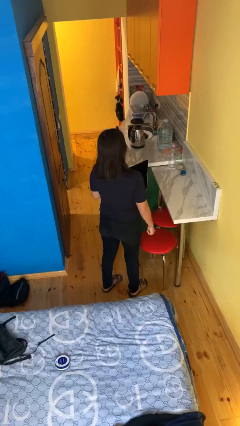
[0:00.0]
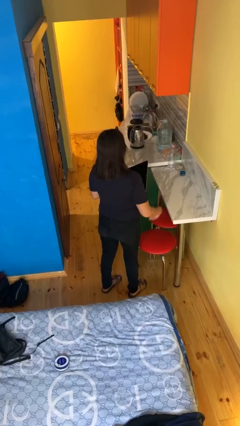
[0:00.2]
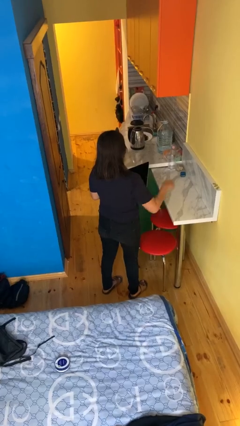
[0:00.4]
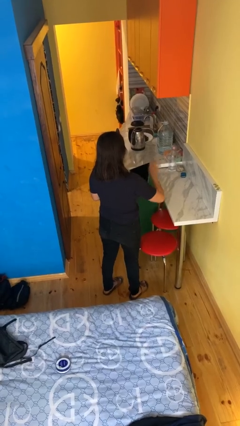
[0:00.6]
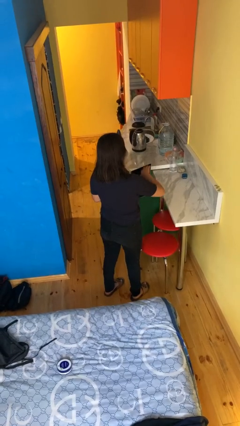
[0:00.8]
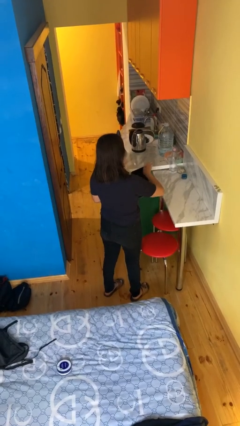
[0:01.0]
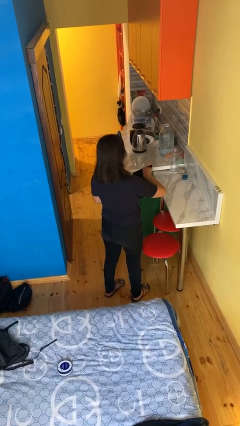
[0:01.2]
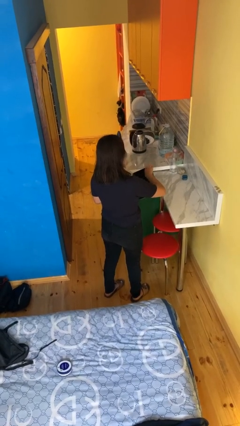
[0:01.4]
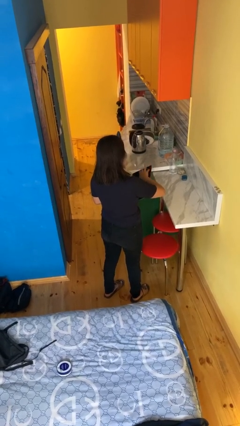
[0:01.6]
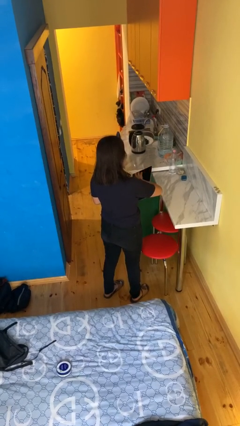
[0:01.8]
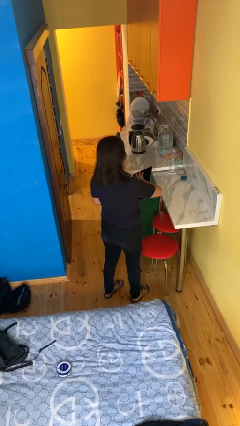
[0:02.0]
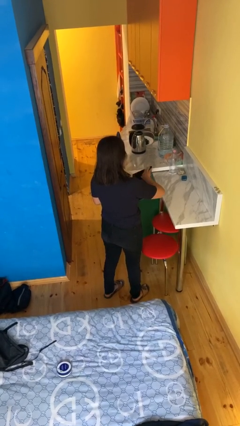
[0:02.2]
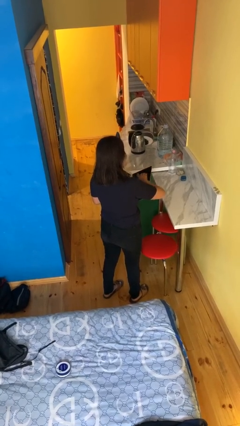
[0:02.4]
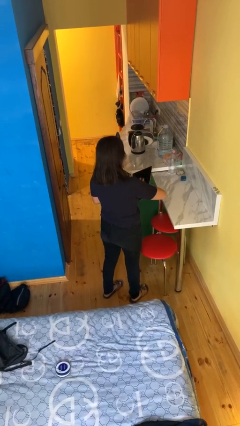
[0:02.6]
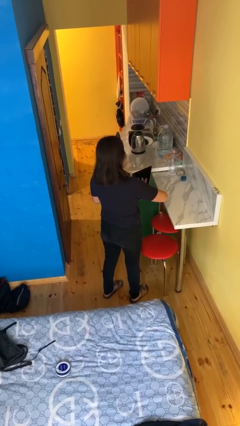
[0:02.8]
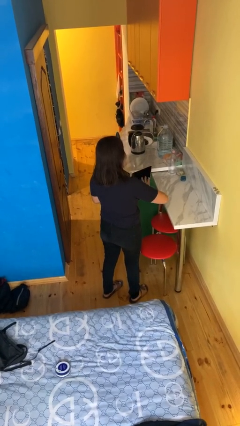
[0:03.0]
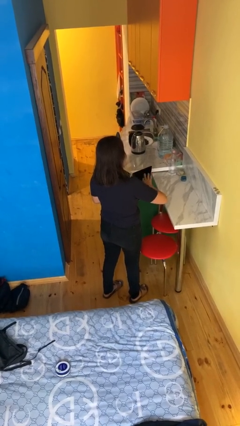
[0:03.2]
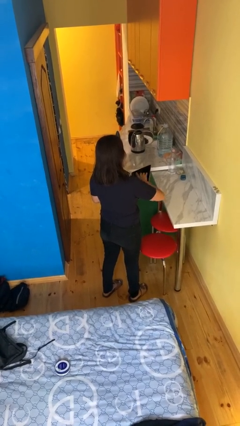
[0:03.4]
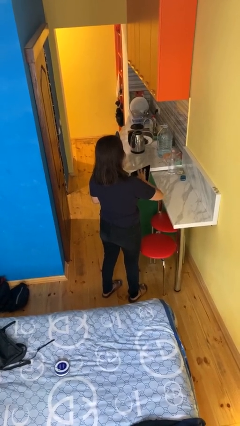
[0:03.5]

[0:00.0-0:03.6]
person interacts with tablet

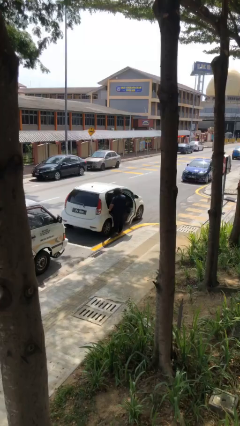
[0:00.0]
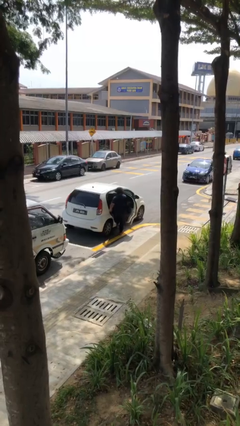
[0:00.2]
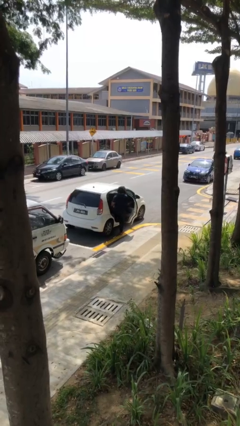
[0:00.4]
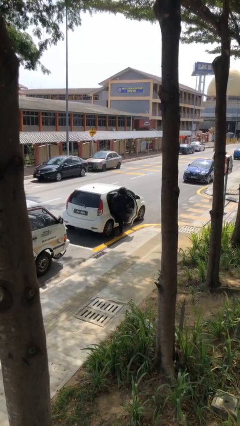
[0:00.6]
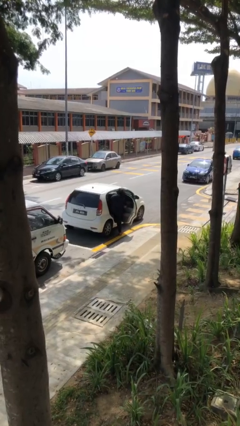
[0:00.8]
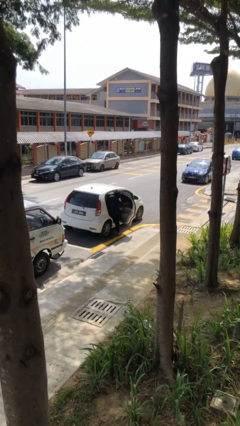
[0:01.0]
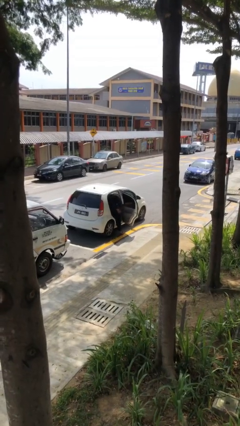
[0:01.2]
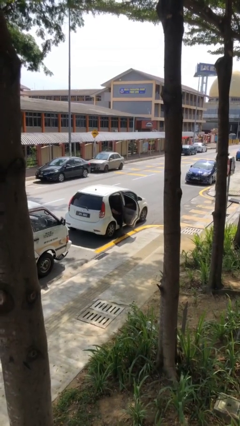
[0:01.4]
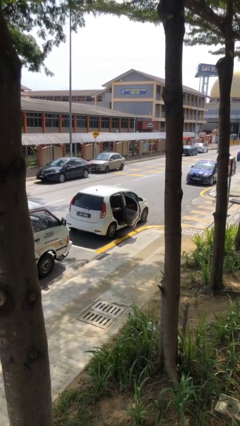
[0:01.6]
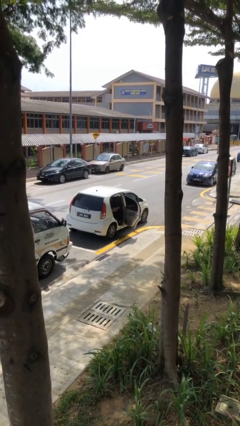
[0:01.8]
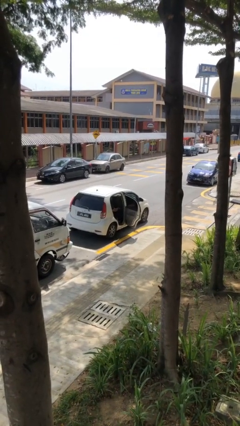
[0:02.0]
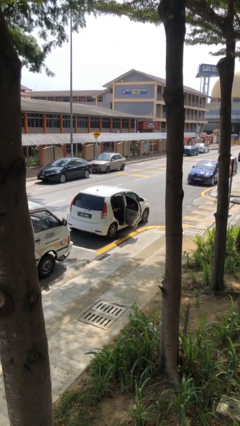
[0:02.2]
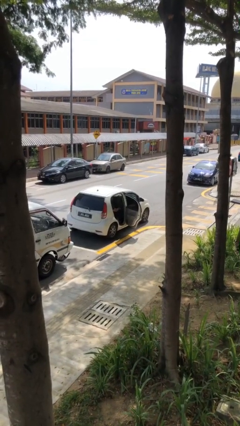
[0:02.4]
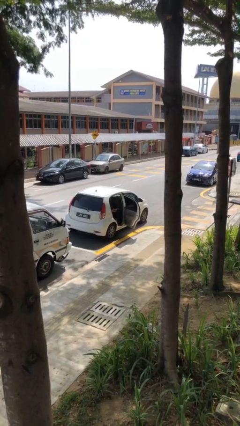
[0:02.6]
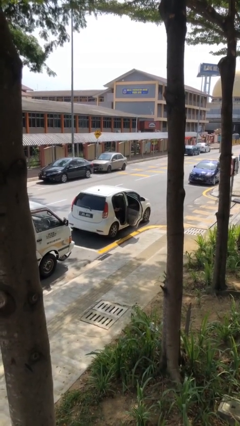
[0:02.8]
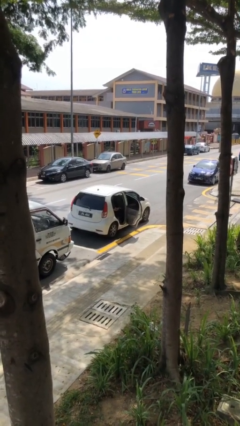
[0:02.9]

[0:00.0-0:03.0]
person enters car

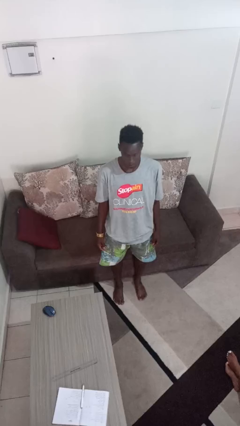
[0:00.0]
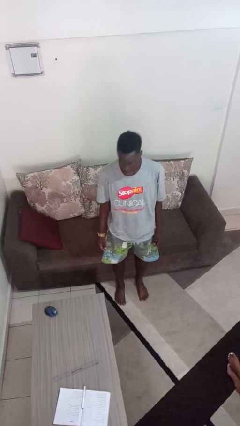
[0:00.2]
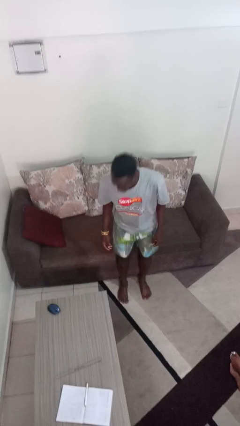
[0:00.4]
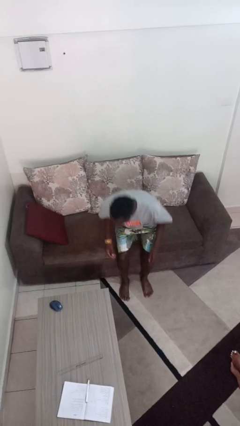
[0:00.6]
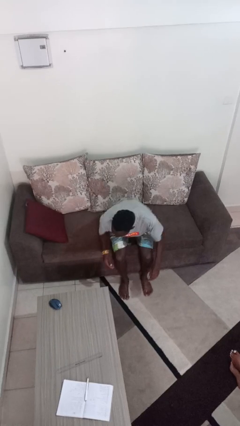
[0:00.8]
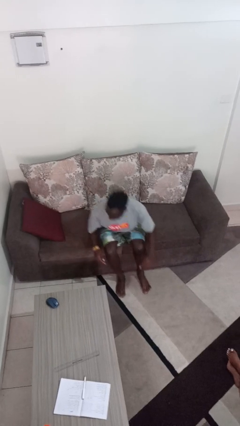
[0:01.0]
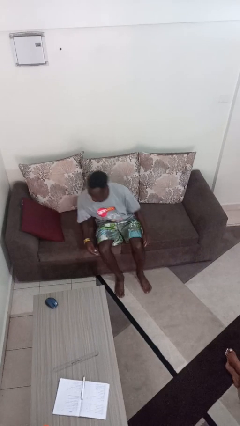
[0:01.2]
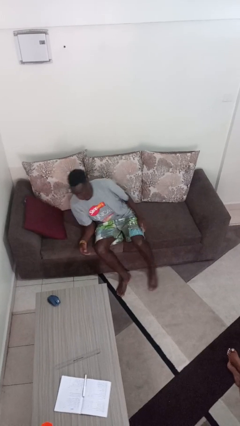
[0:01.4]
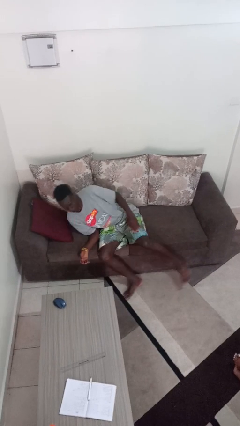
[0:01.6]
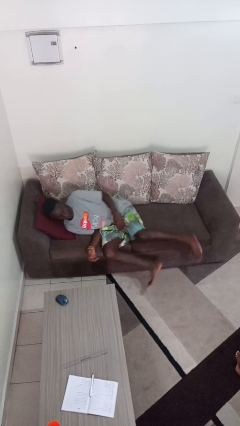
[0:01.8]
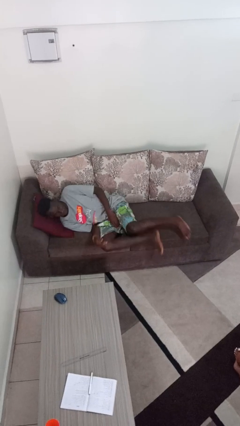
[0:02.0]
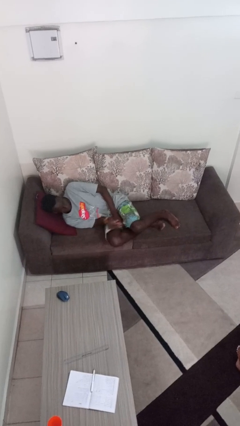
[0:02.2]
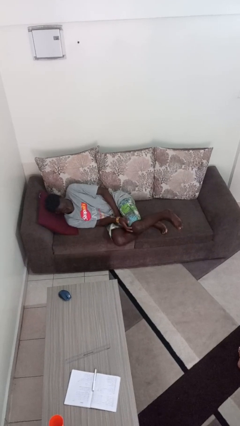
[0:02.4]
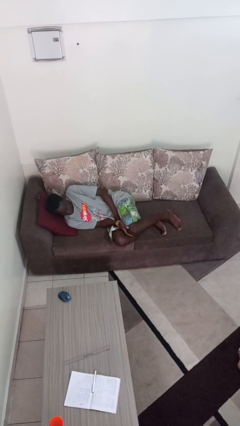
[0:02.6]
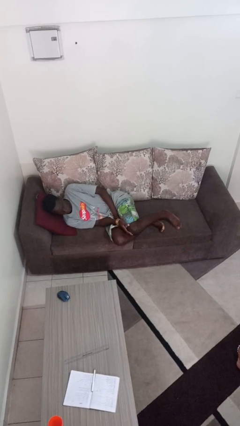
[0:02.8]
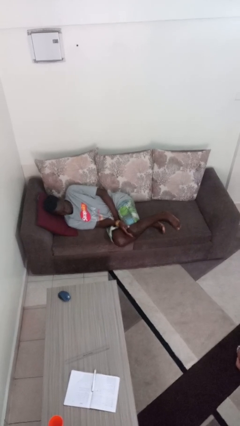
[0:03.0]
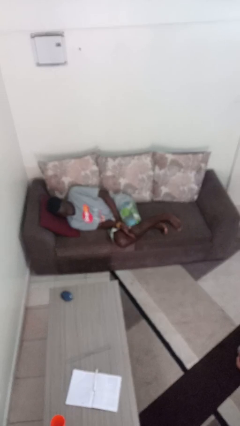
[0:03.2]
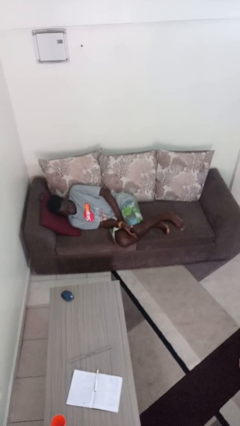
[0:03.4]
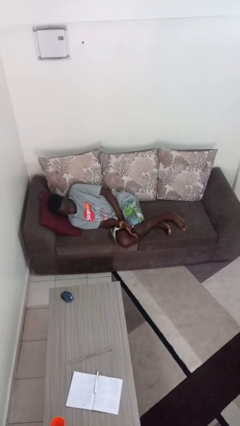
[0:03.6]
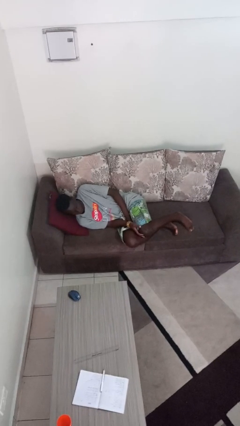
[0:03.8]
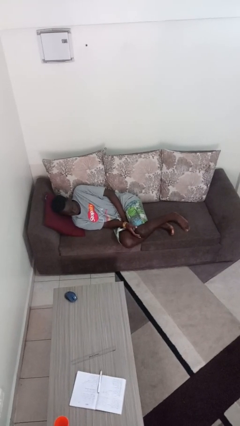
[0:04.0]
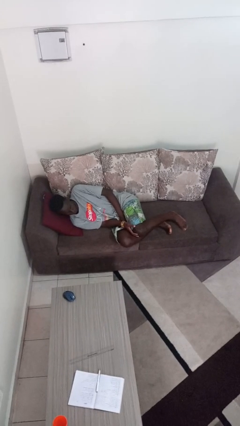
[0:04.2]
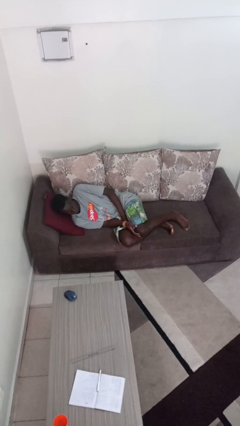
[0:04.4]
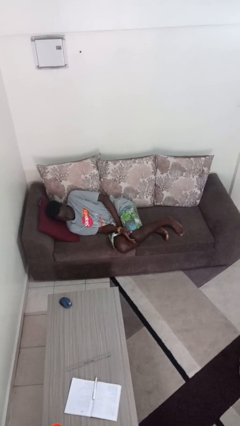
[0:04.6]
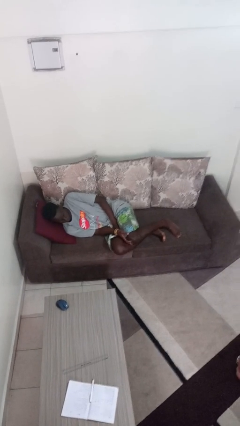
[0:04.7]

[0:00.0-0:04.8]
person lies down on couch

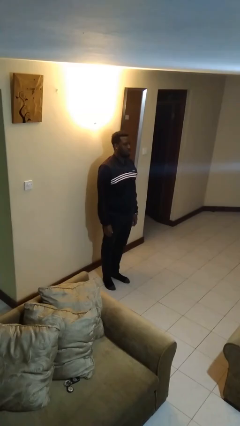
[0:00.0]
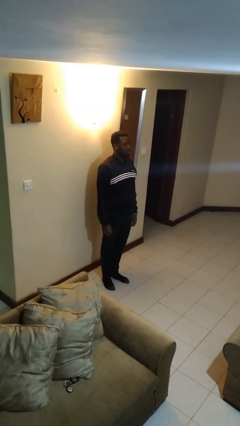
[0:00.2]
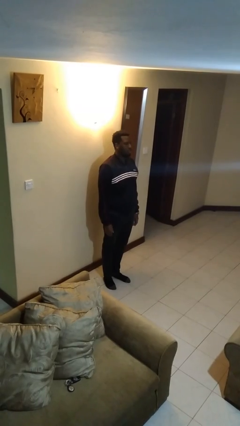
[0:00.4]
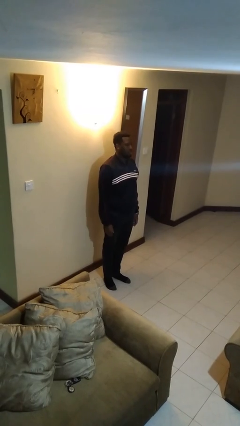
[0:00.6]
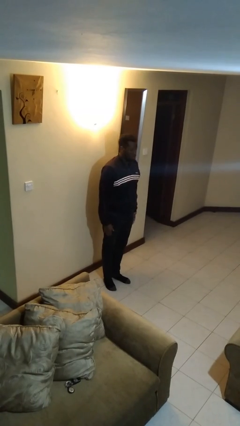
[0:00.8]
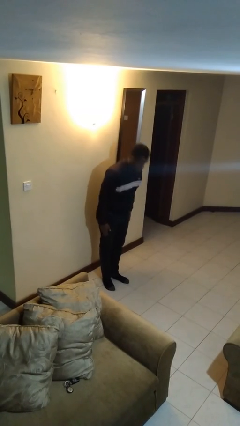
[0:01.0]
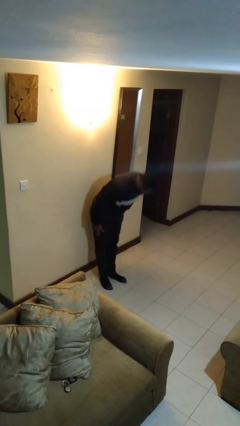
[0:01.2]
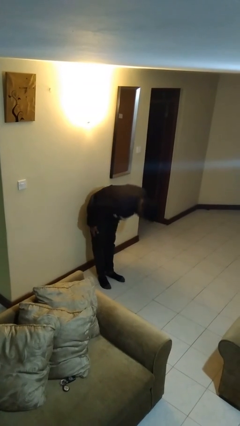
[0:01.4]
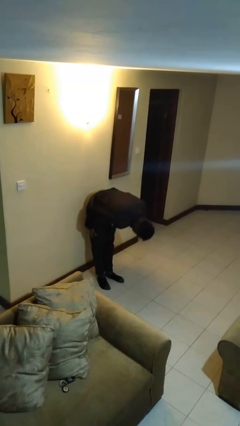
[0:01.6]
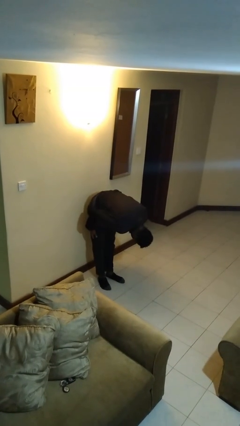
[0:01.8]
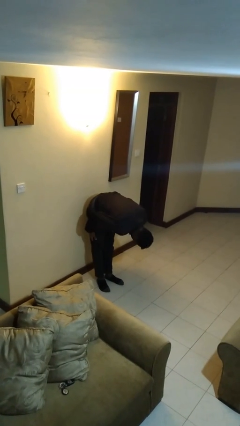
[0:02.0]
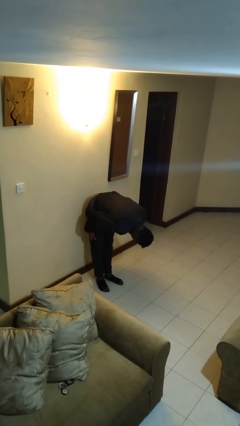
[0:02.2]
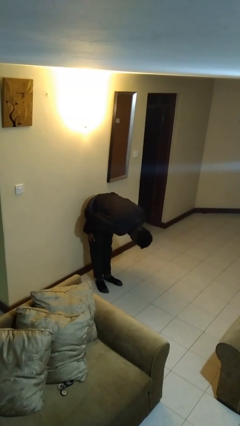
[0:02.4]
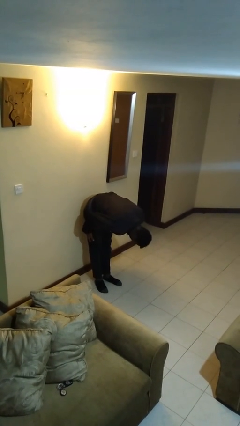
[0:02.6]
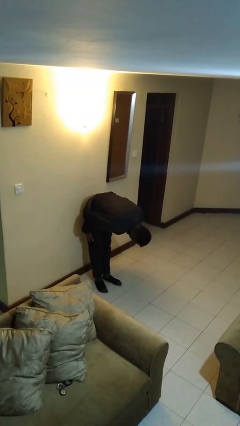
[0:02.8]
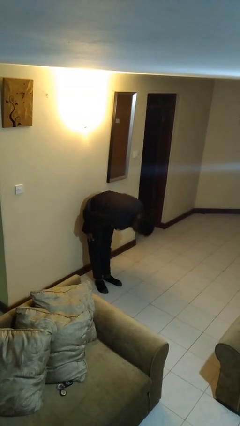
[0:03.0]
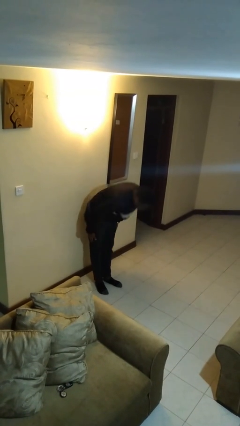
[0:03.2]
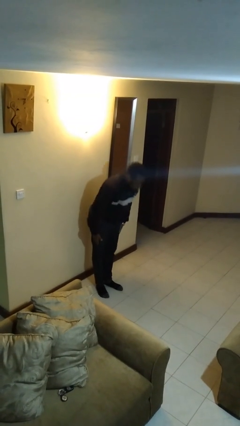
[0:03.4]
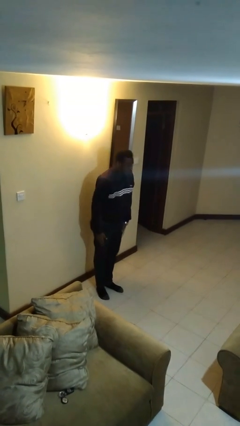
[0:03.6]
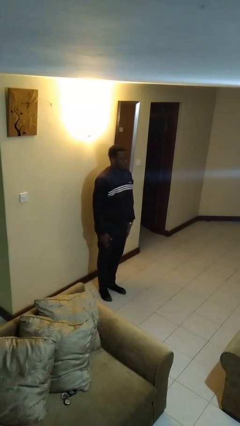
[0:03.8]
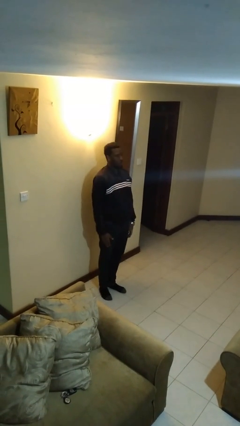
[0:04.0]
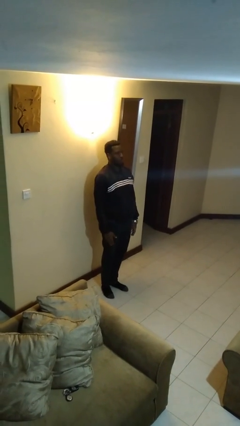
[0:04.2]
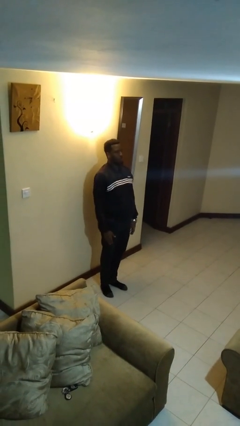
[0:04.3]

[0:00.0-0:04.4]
person bows

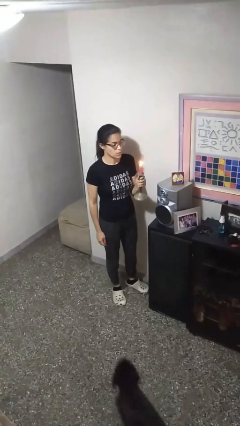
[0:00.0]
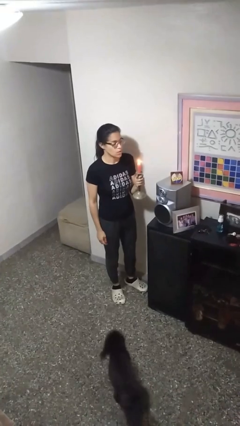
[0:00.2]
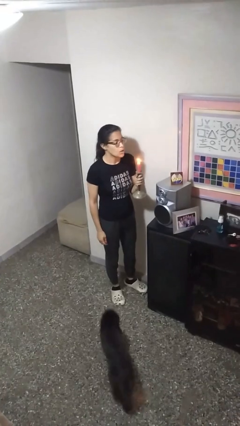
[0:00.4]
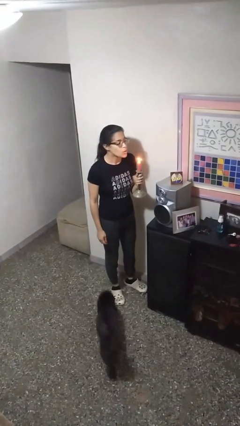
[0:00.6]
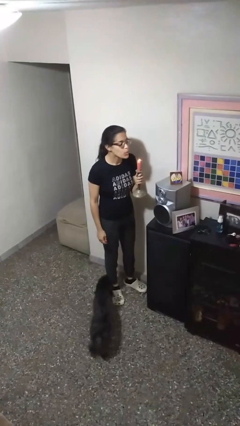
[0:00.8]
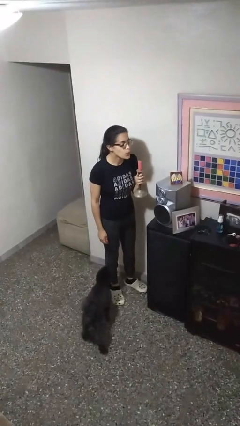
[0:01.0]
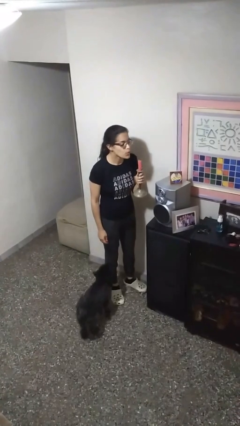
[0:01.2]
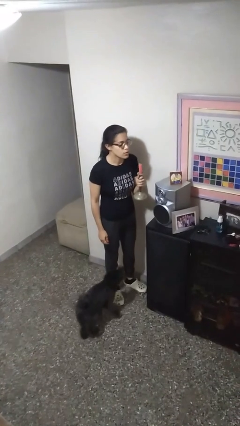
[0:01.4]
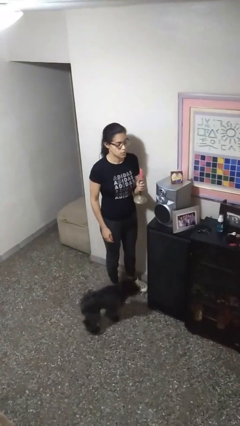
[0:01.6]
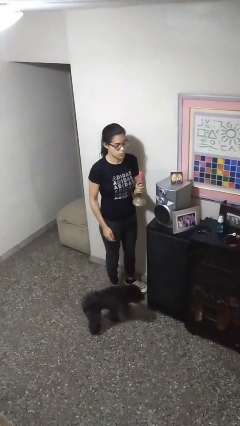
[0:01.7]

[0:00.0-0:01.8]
person extinguishes candle
